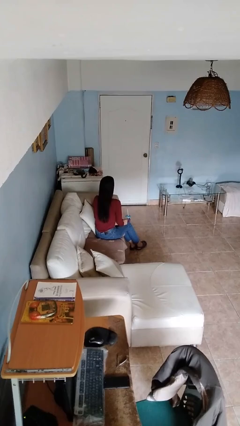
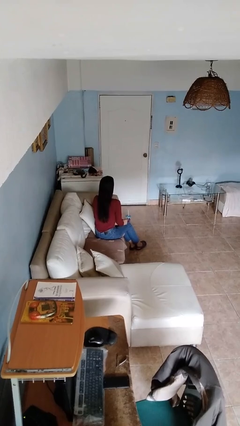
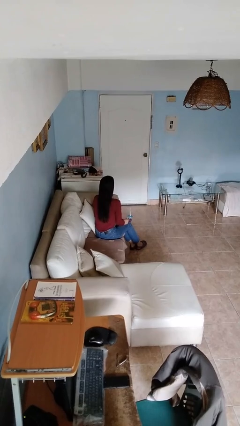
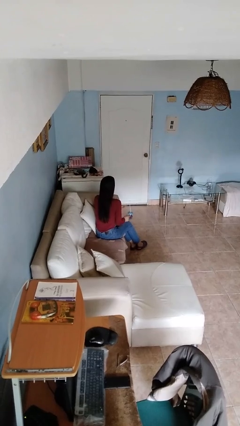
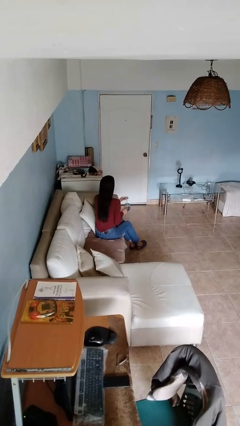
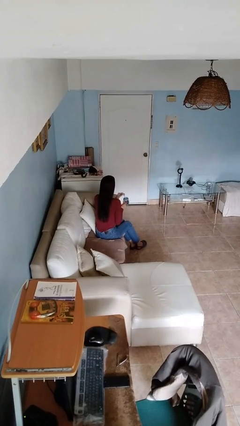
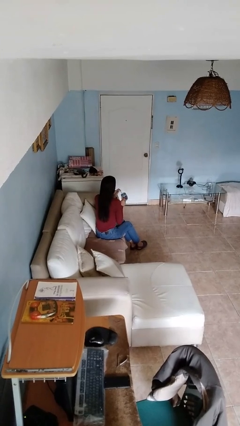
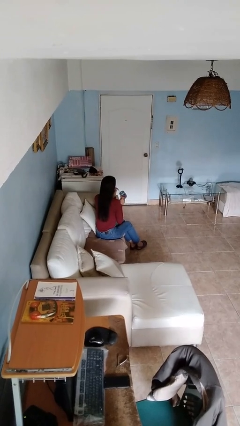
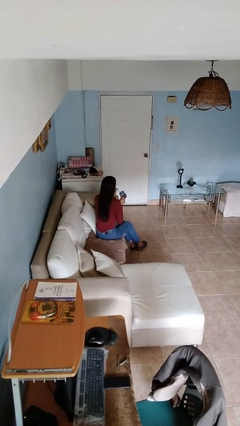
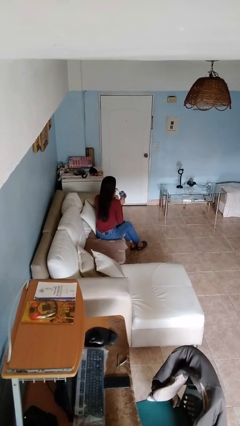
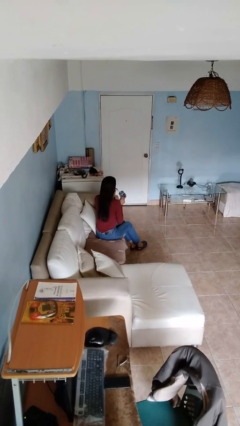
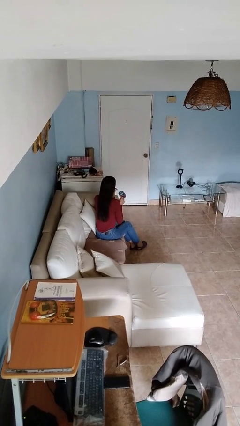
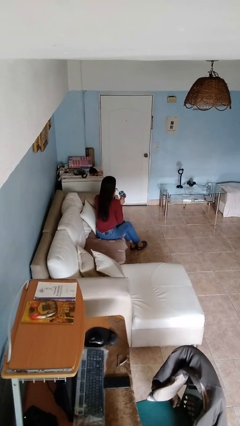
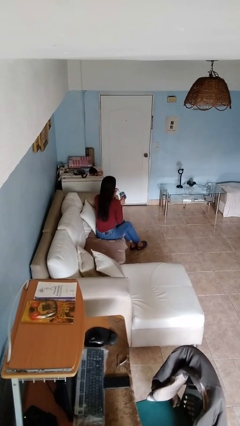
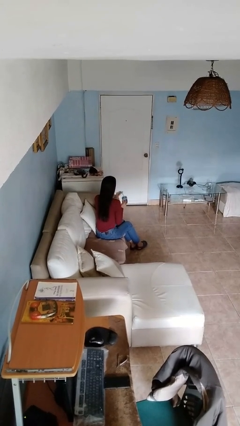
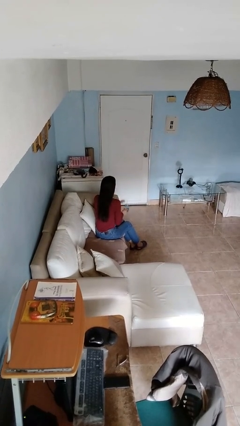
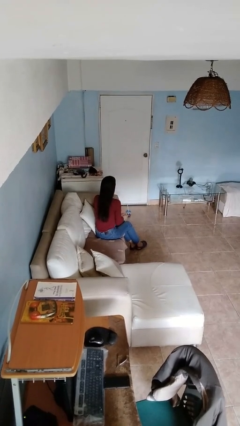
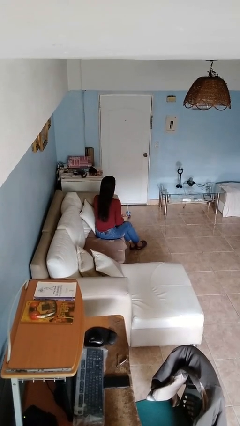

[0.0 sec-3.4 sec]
person drinks from straw

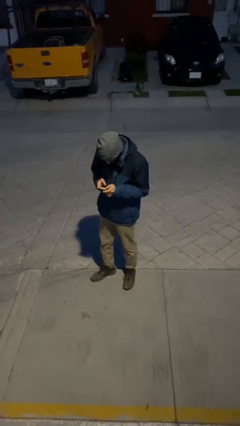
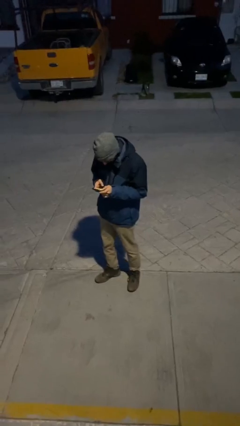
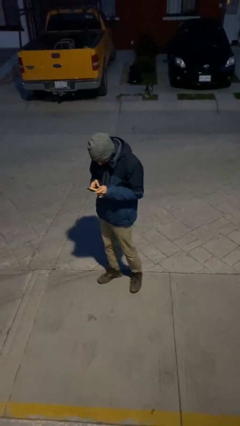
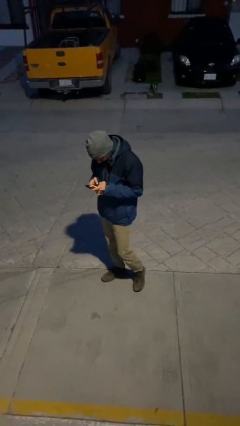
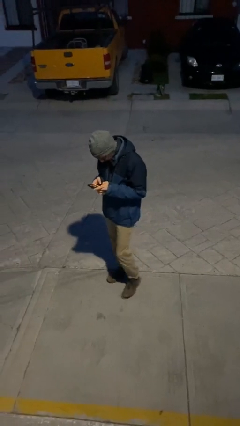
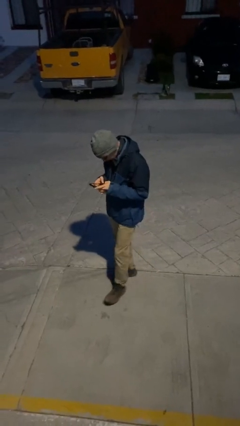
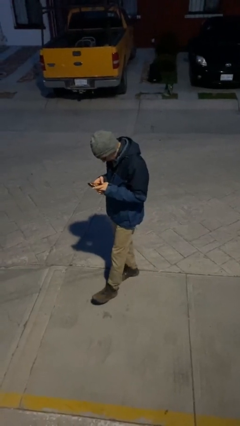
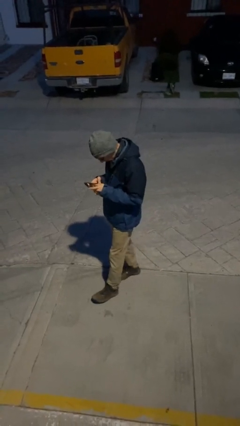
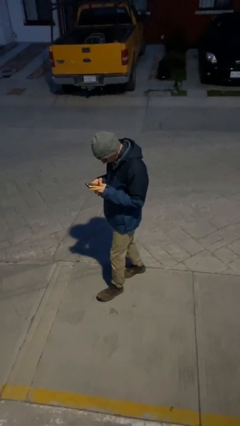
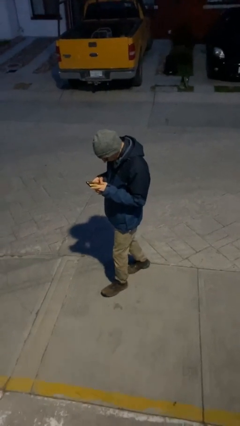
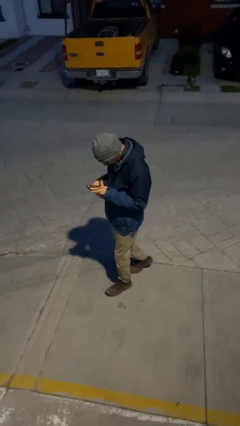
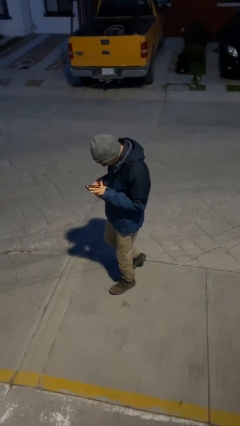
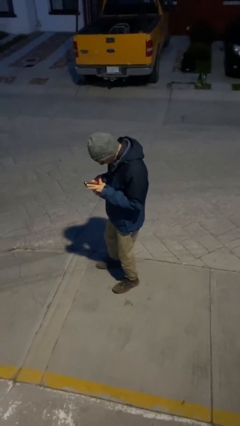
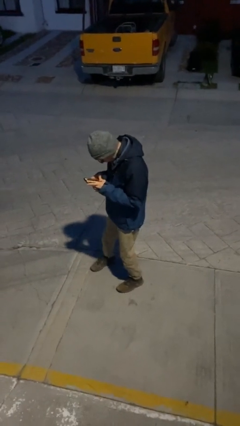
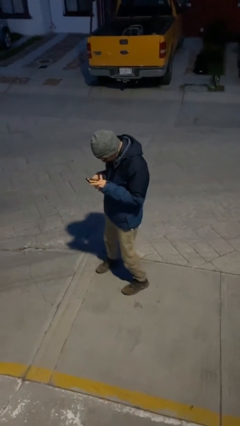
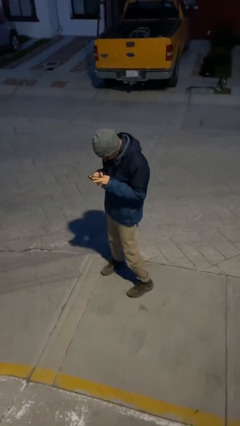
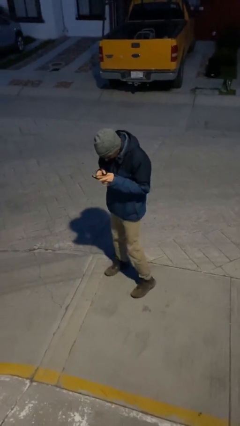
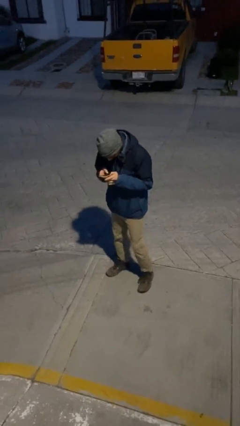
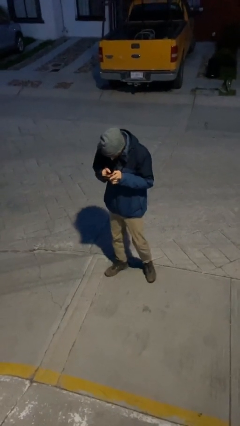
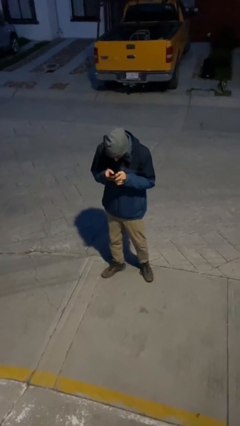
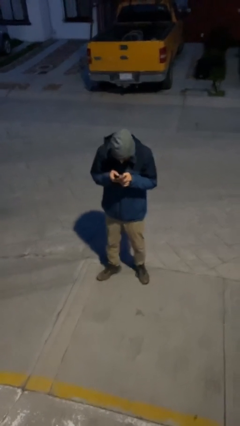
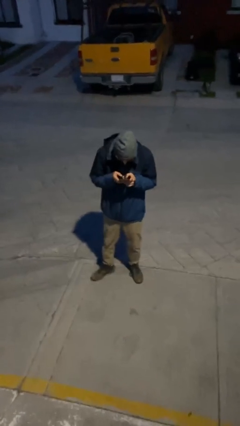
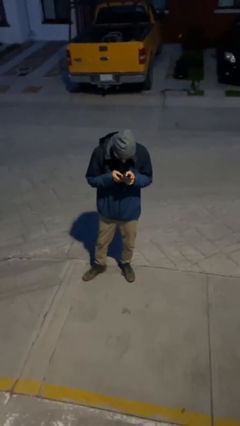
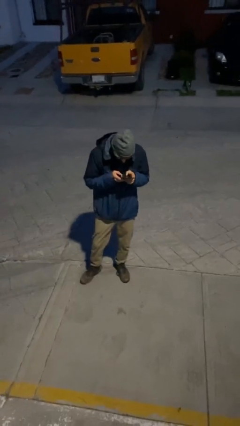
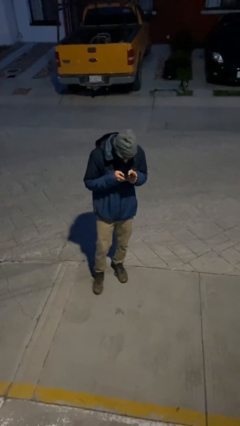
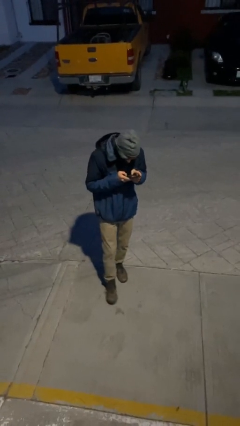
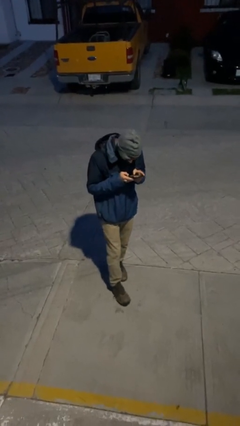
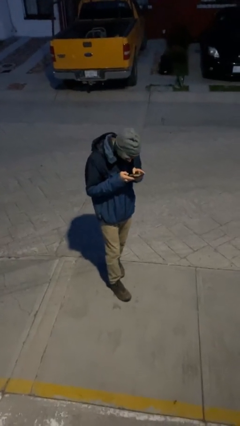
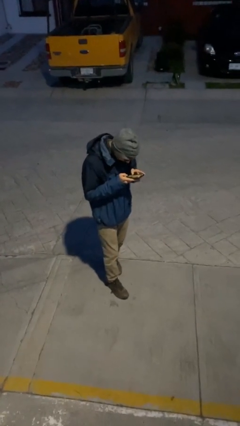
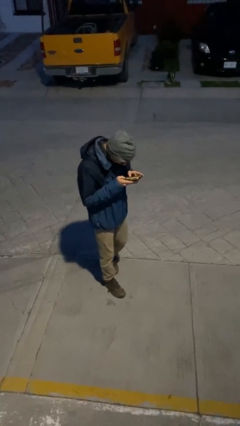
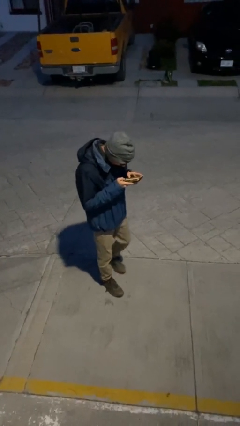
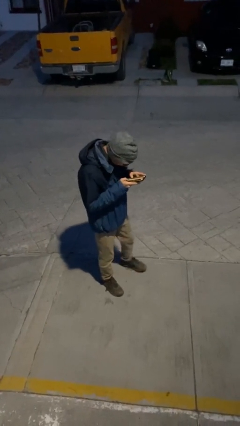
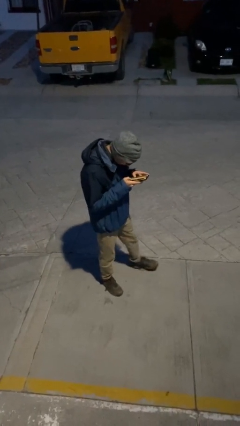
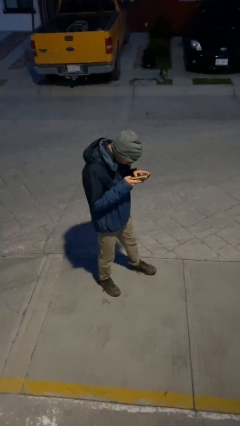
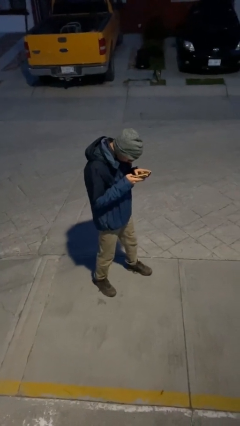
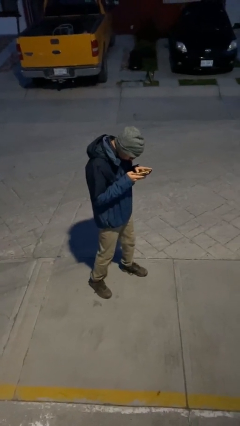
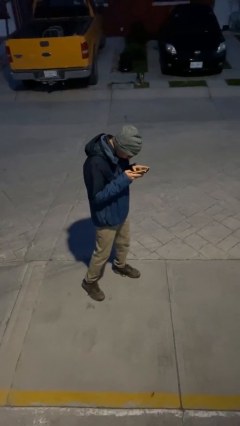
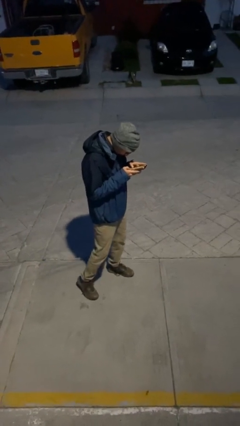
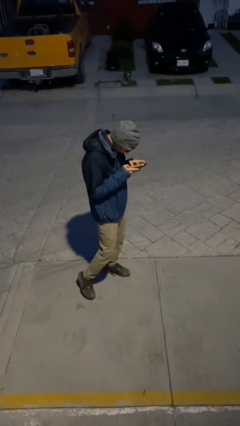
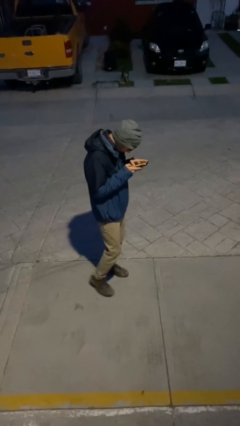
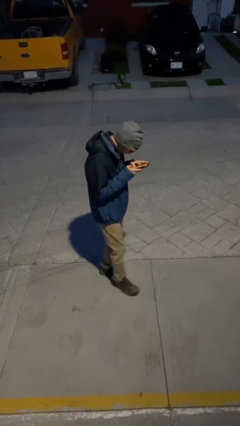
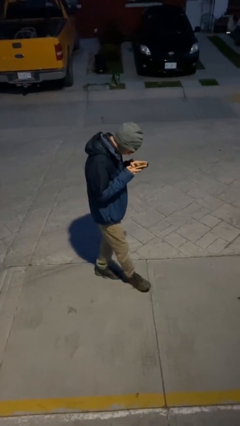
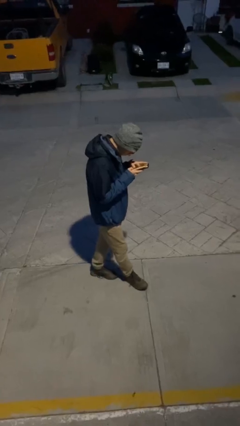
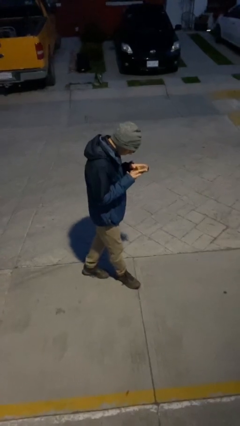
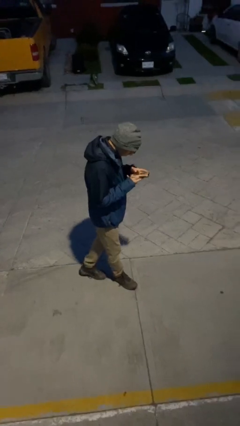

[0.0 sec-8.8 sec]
person texts on phone

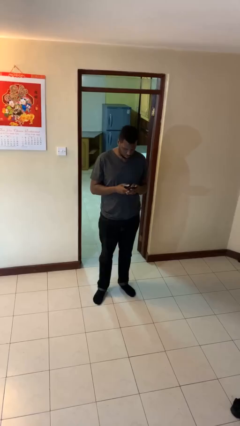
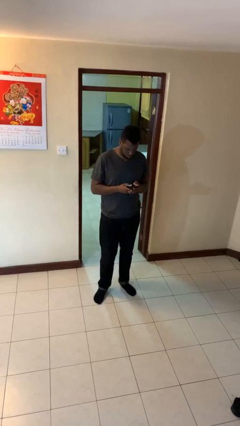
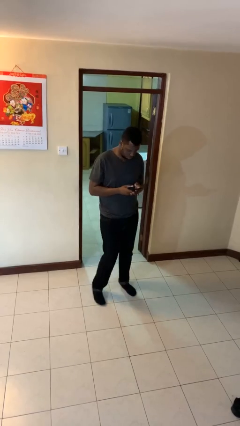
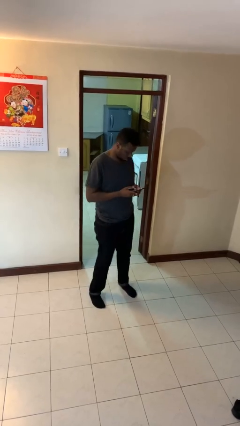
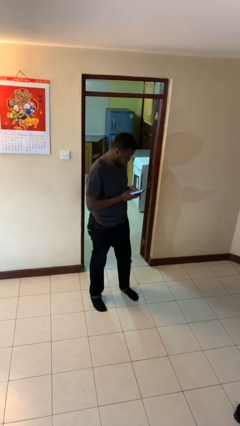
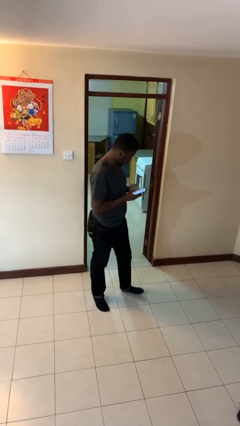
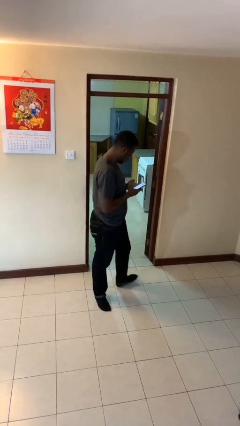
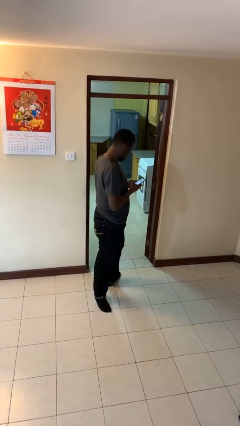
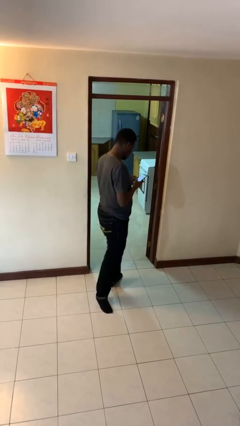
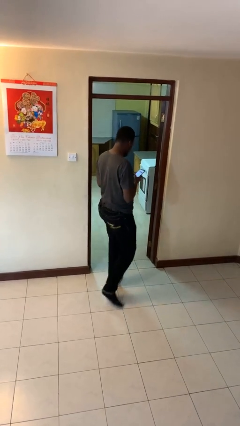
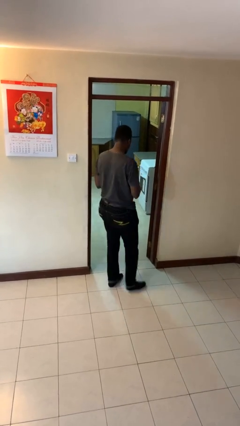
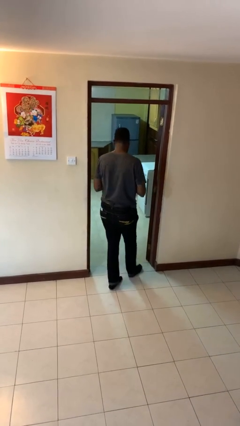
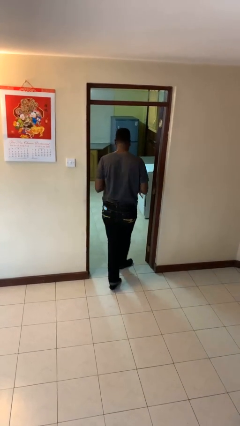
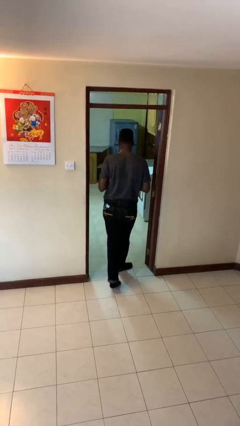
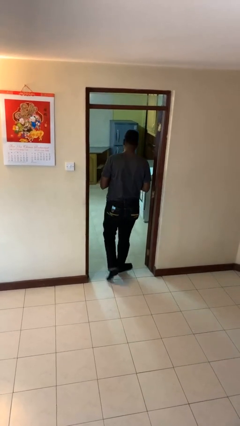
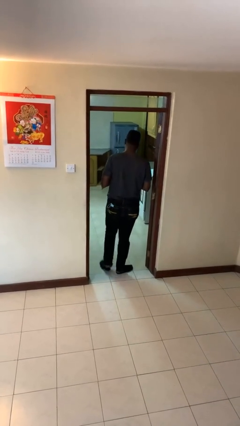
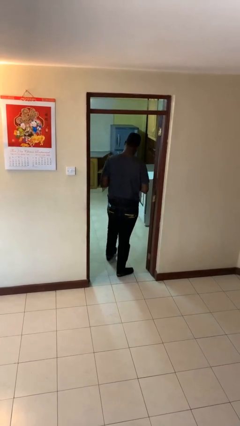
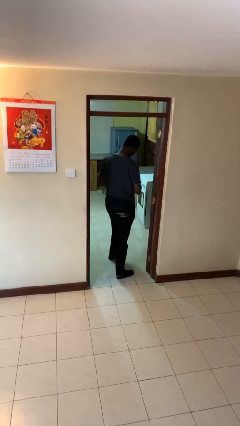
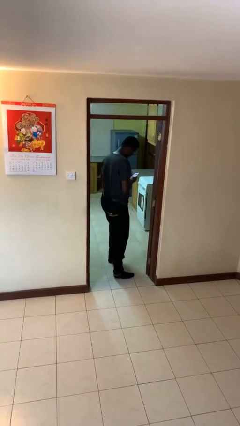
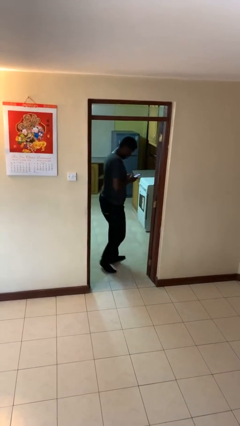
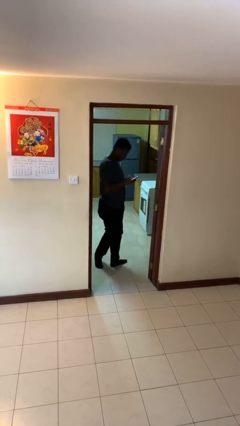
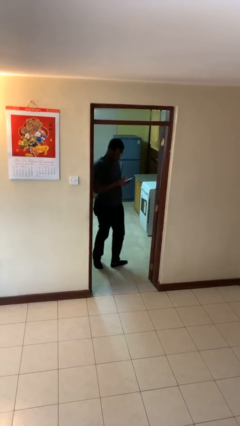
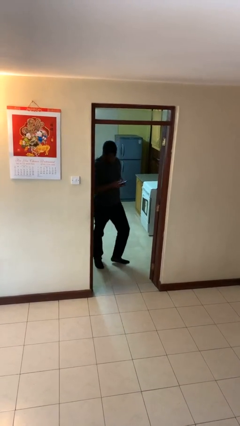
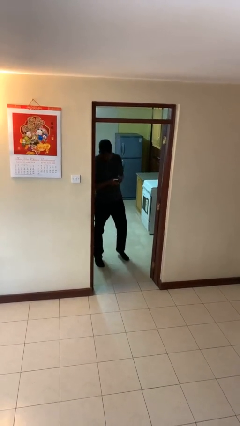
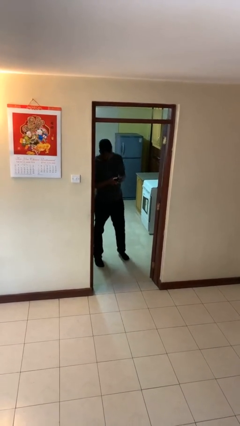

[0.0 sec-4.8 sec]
person exits scene through structure

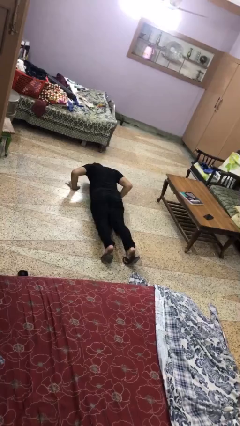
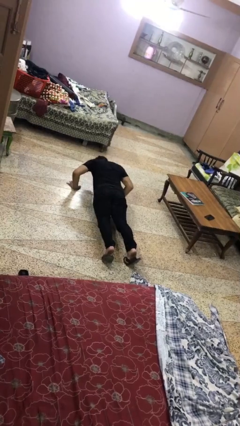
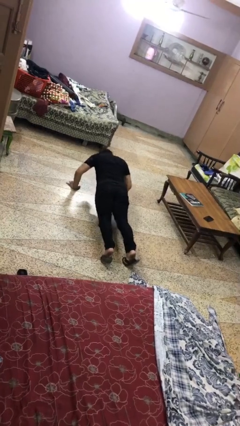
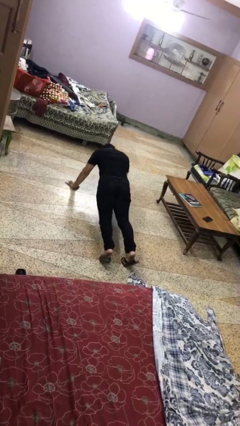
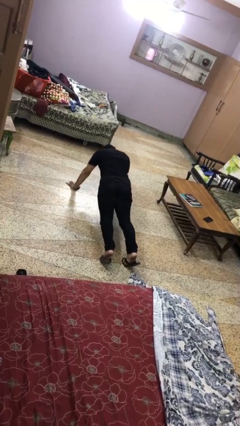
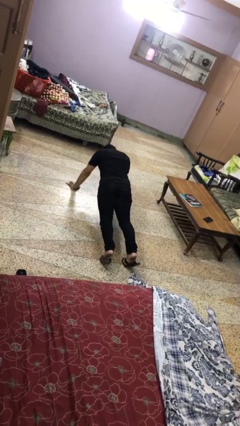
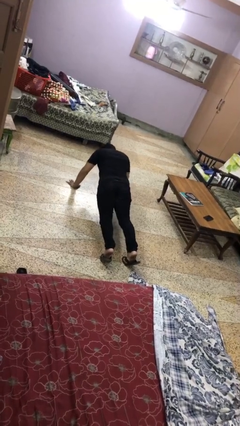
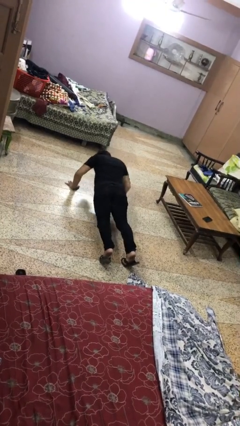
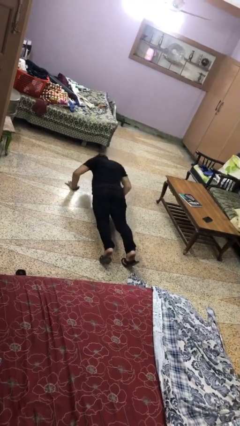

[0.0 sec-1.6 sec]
person exercises with pushup
